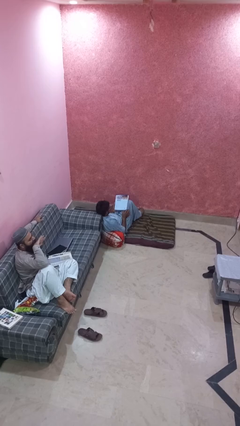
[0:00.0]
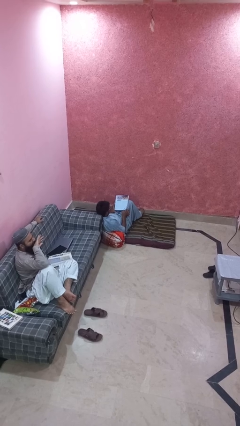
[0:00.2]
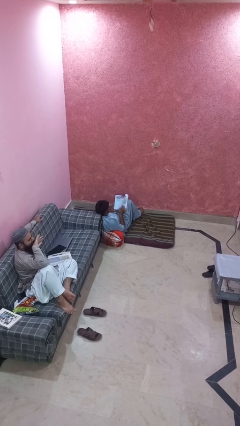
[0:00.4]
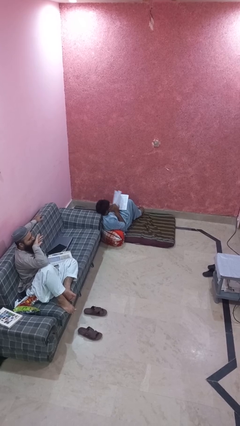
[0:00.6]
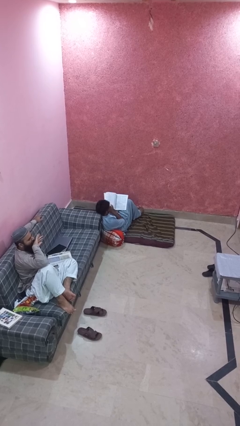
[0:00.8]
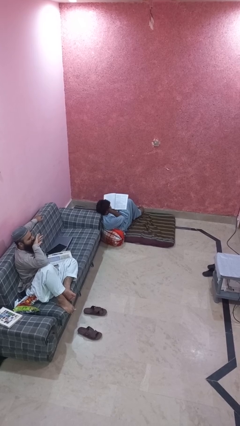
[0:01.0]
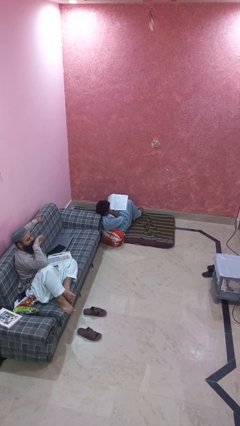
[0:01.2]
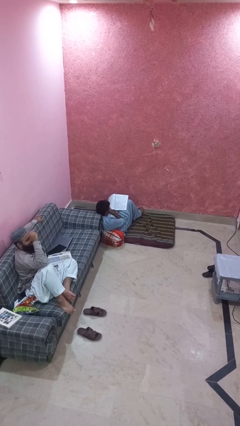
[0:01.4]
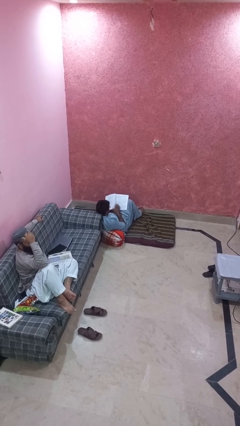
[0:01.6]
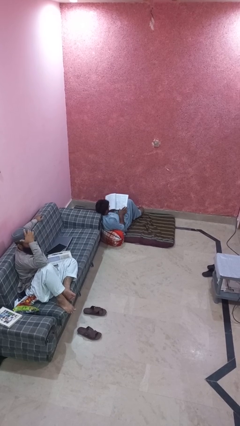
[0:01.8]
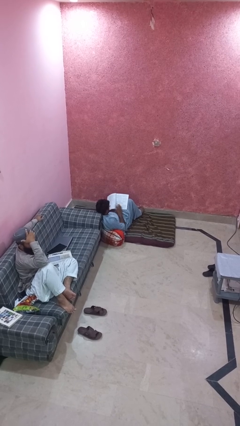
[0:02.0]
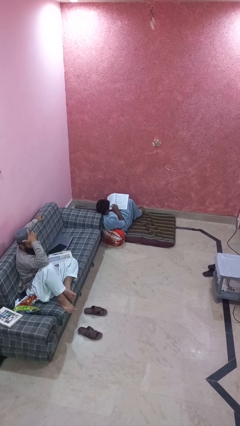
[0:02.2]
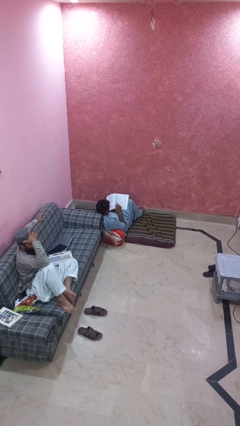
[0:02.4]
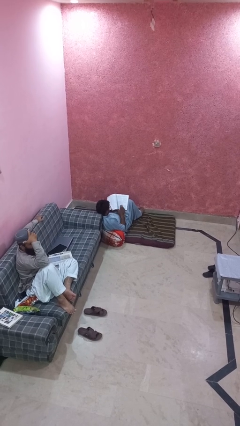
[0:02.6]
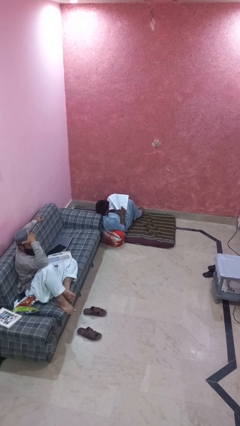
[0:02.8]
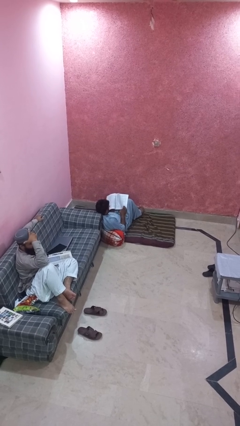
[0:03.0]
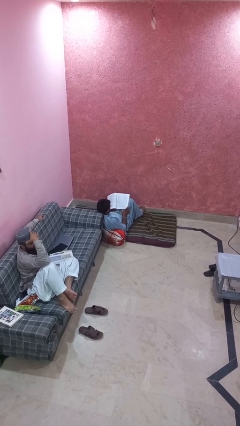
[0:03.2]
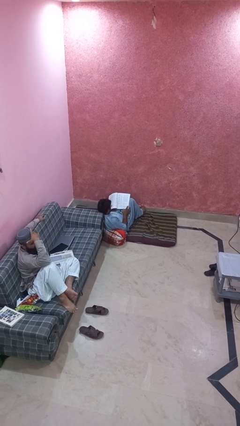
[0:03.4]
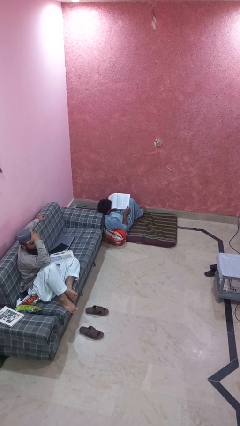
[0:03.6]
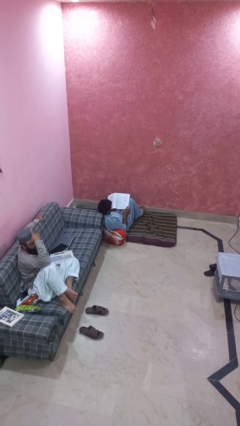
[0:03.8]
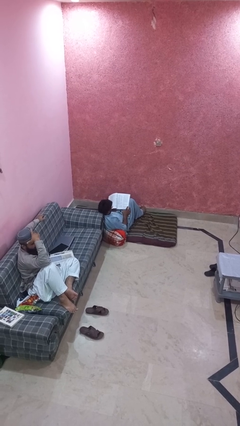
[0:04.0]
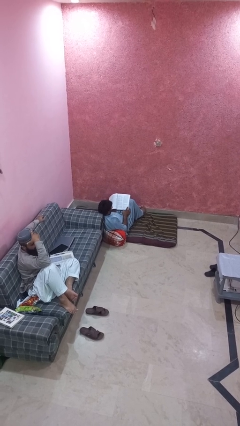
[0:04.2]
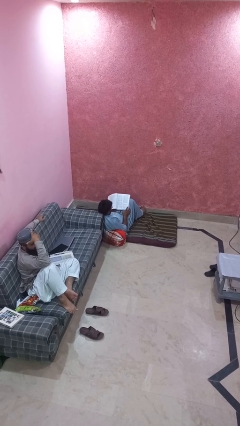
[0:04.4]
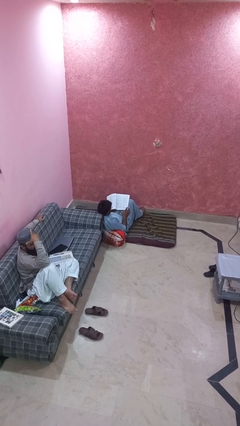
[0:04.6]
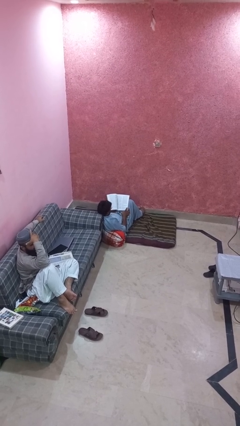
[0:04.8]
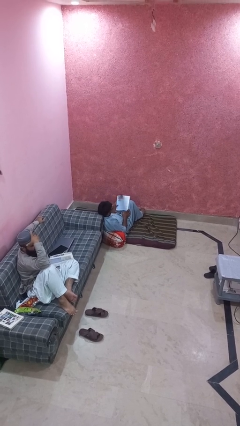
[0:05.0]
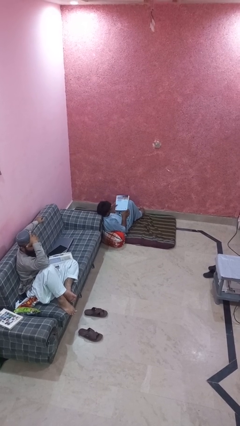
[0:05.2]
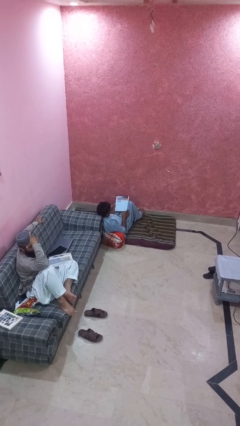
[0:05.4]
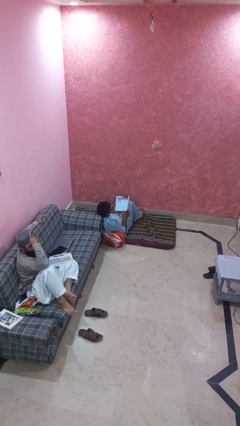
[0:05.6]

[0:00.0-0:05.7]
person reads magazine

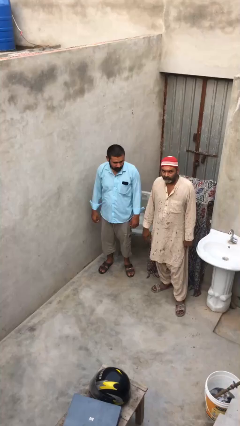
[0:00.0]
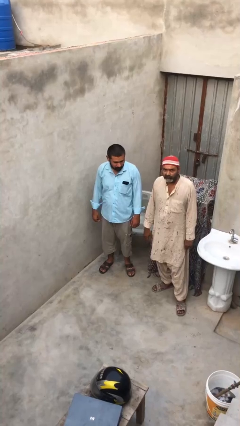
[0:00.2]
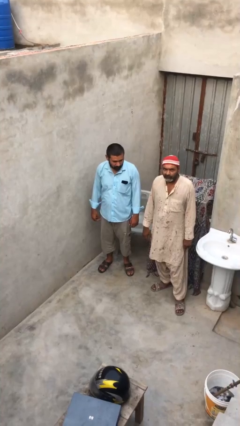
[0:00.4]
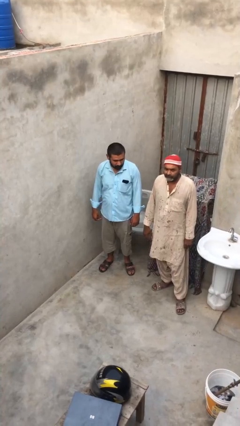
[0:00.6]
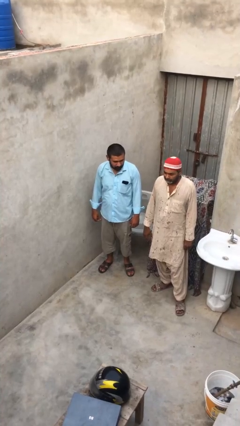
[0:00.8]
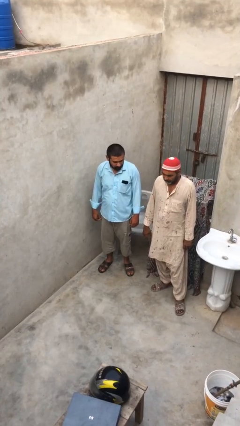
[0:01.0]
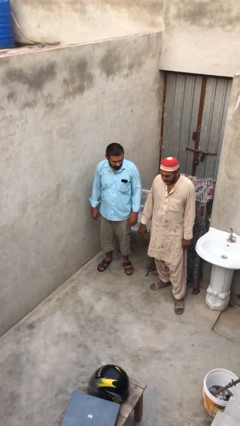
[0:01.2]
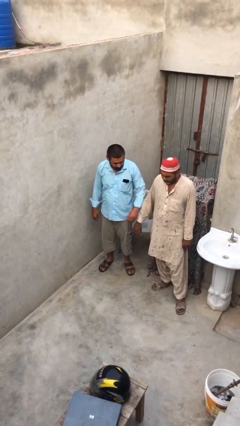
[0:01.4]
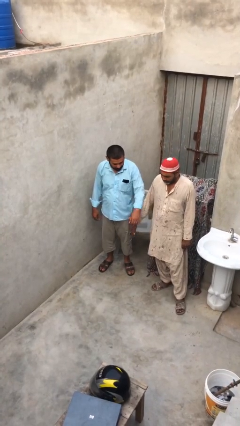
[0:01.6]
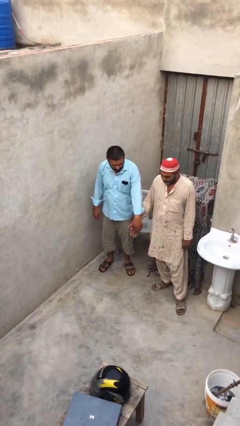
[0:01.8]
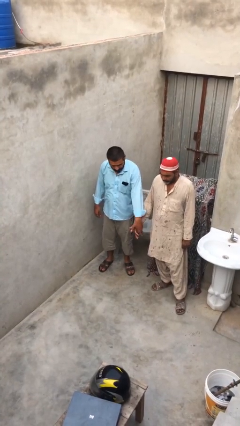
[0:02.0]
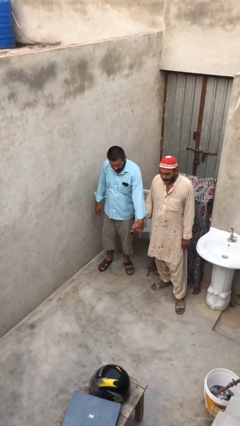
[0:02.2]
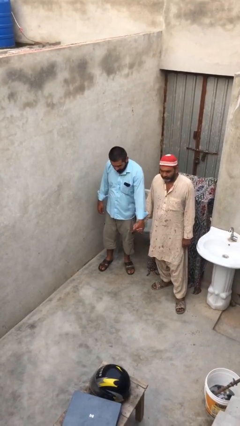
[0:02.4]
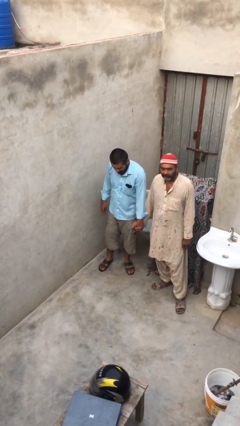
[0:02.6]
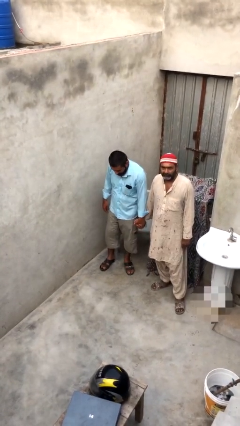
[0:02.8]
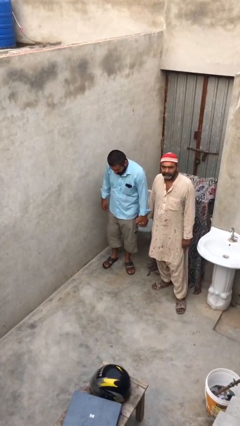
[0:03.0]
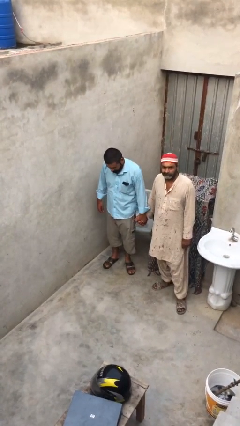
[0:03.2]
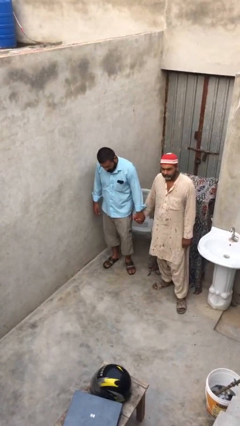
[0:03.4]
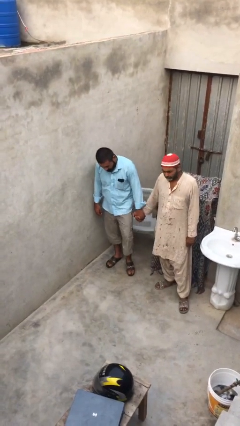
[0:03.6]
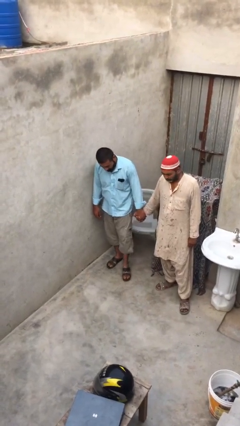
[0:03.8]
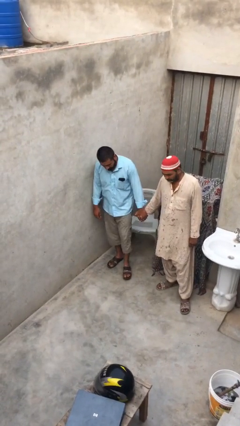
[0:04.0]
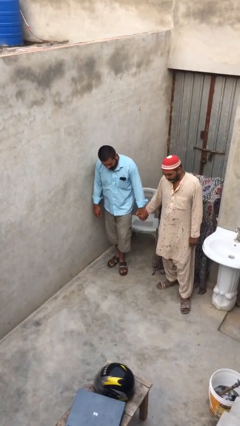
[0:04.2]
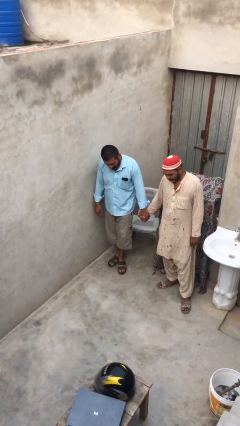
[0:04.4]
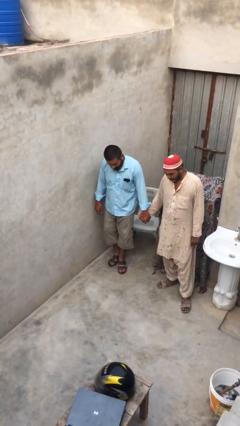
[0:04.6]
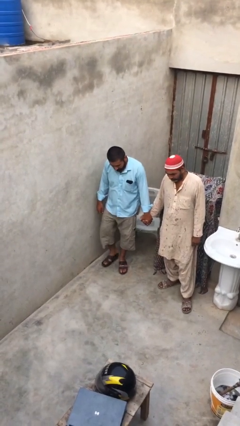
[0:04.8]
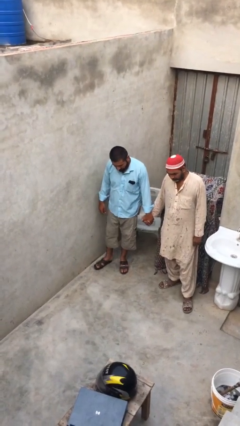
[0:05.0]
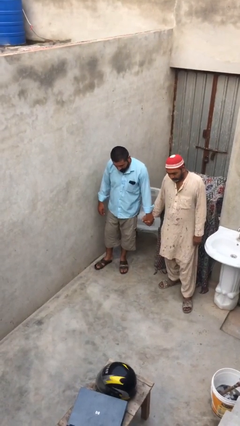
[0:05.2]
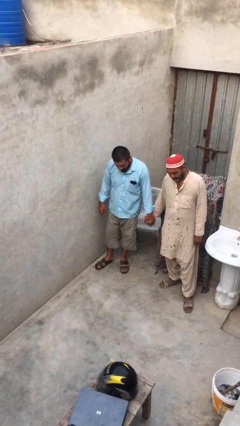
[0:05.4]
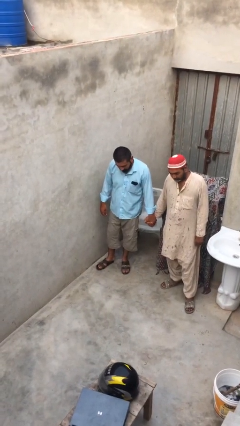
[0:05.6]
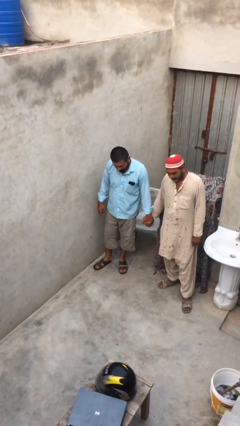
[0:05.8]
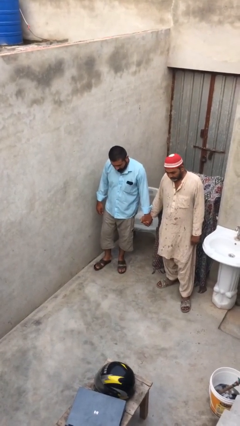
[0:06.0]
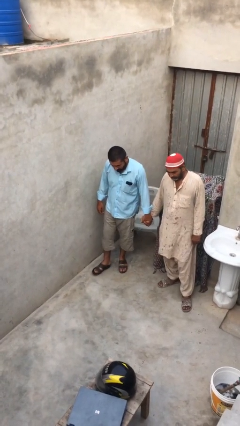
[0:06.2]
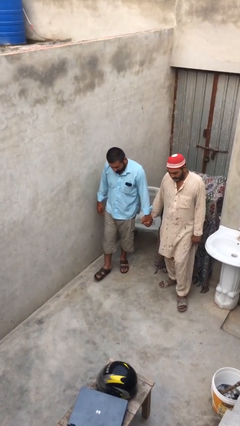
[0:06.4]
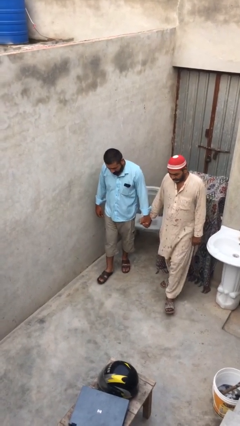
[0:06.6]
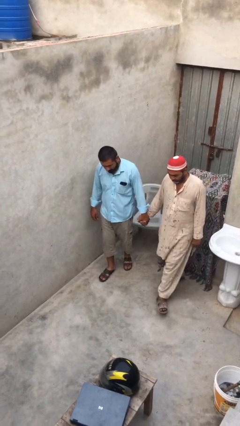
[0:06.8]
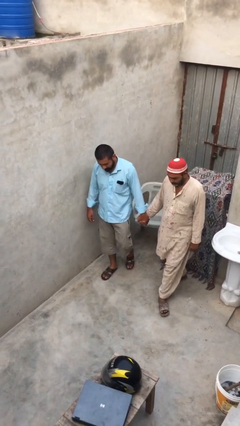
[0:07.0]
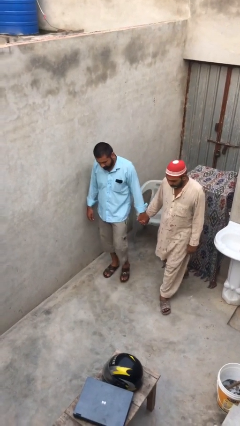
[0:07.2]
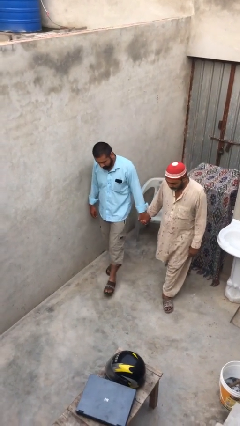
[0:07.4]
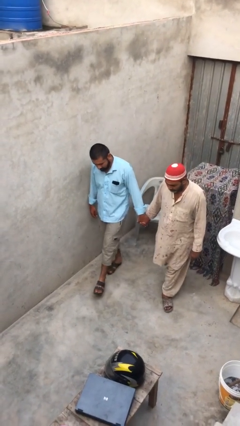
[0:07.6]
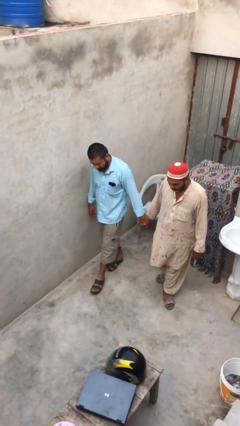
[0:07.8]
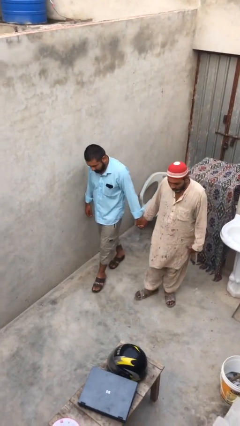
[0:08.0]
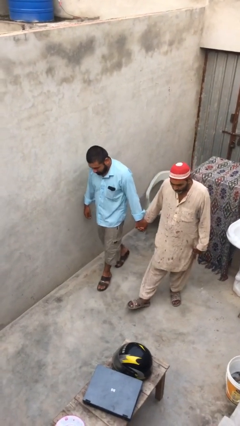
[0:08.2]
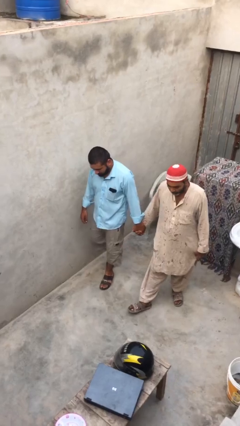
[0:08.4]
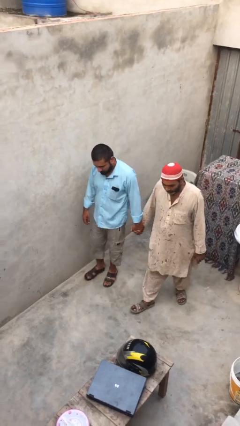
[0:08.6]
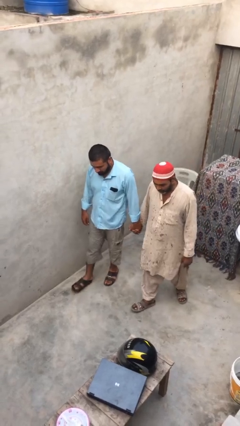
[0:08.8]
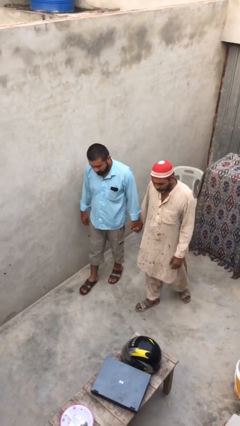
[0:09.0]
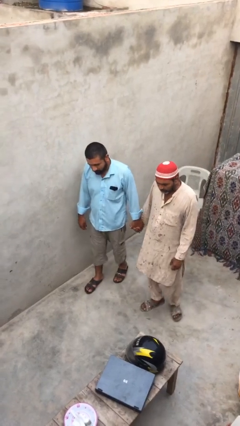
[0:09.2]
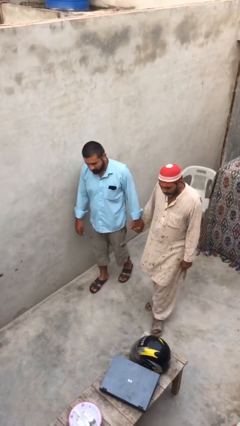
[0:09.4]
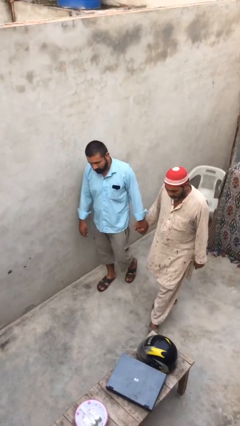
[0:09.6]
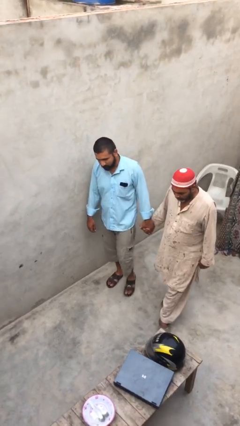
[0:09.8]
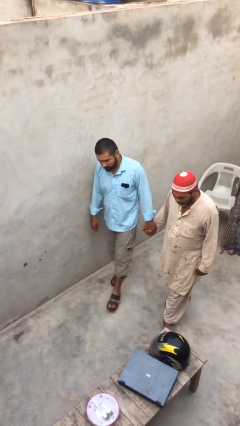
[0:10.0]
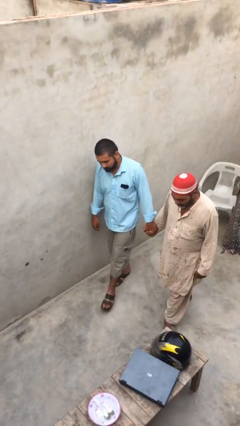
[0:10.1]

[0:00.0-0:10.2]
person holds hand

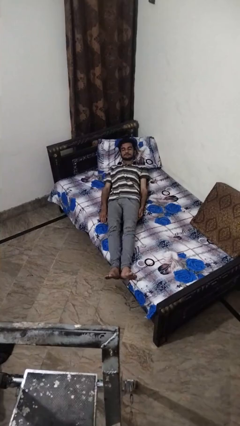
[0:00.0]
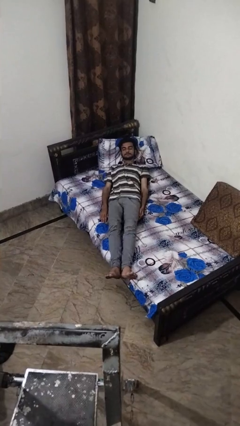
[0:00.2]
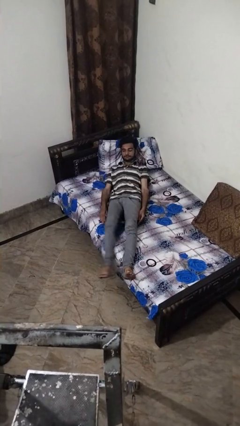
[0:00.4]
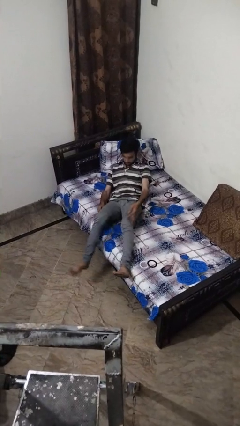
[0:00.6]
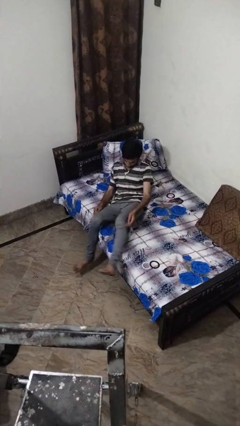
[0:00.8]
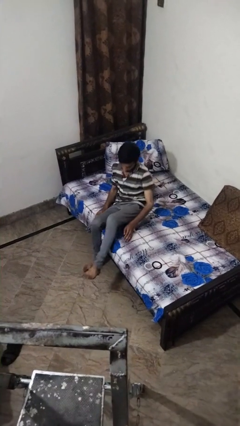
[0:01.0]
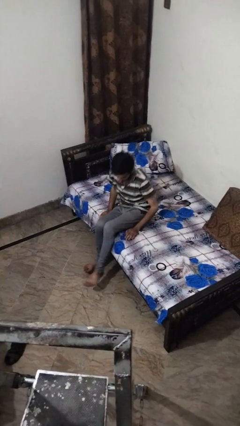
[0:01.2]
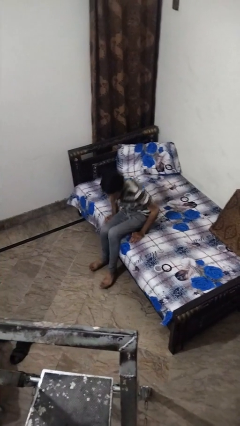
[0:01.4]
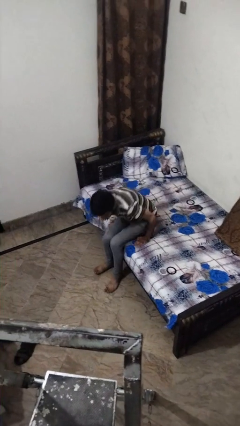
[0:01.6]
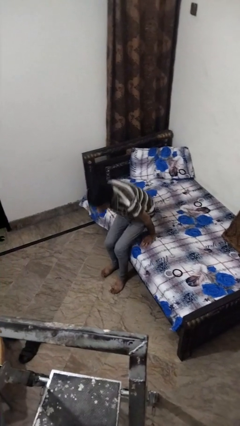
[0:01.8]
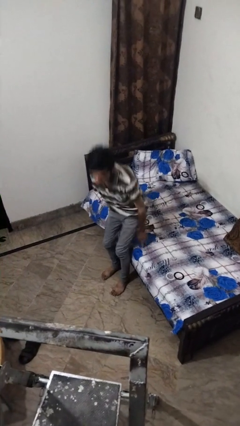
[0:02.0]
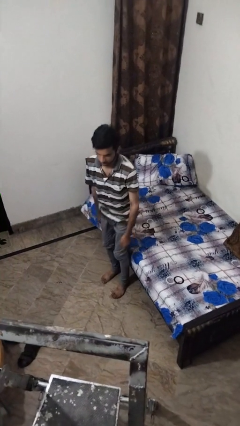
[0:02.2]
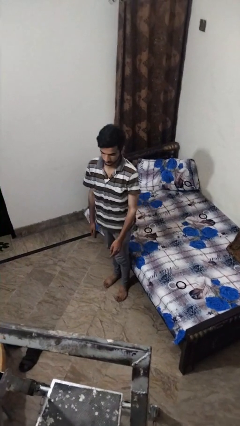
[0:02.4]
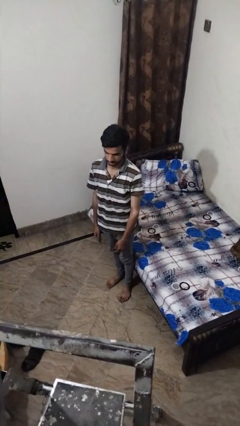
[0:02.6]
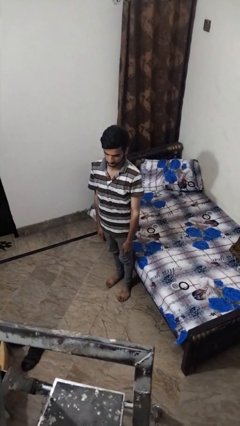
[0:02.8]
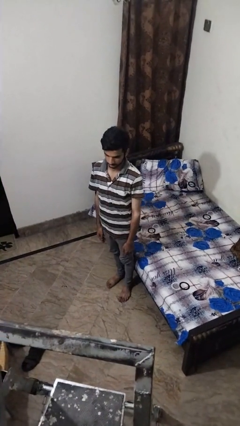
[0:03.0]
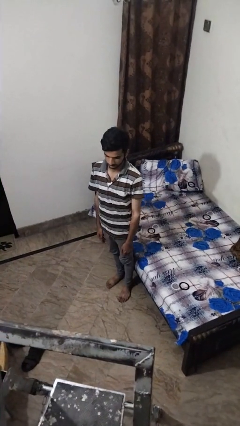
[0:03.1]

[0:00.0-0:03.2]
person stands up
